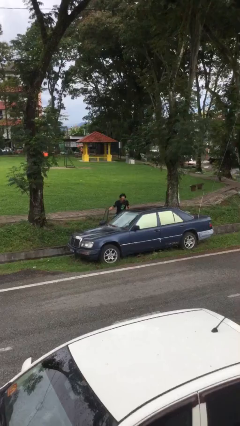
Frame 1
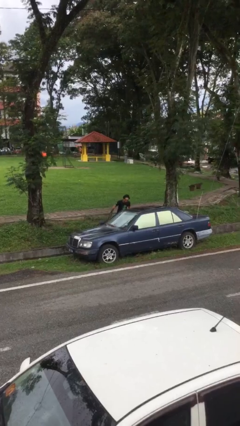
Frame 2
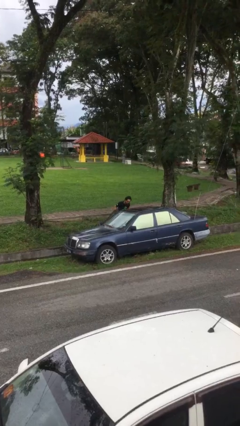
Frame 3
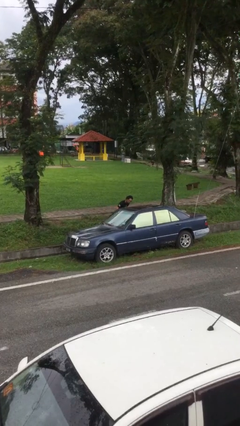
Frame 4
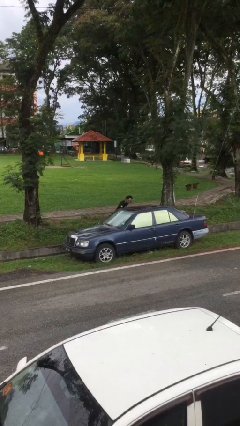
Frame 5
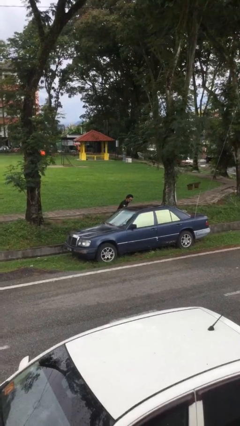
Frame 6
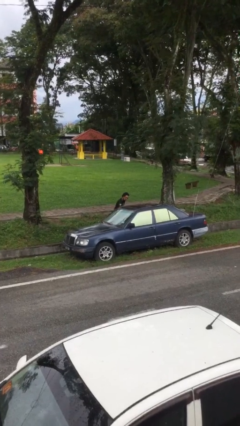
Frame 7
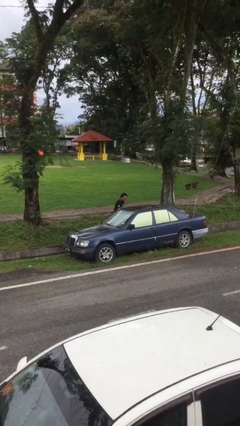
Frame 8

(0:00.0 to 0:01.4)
person closes car door

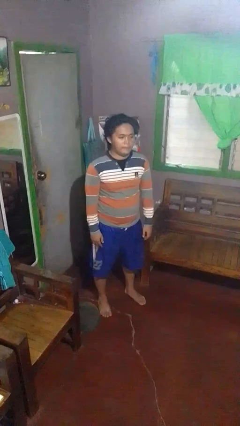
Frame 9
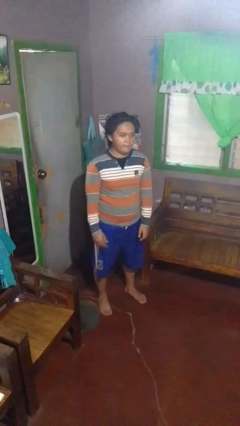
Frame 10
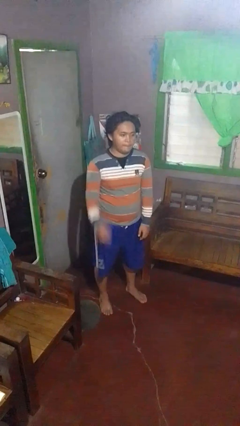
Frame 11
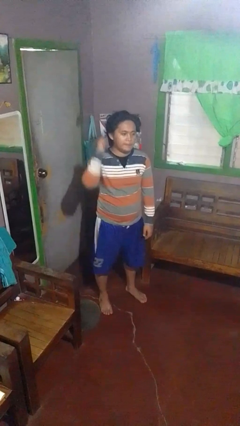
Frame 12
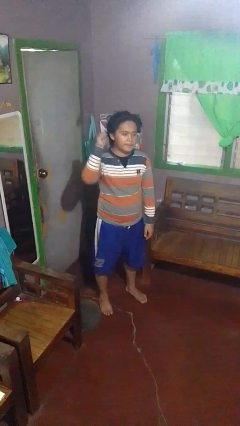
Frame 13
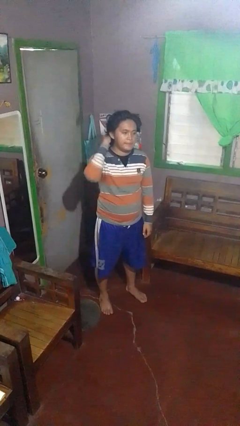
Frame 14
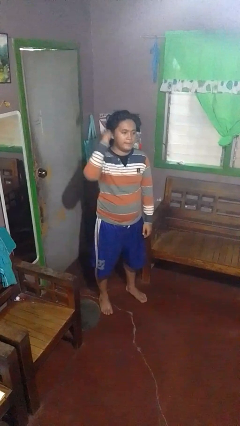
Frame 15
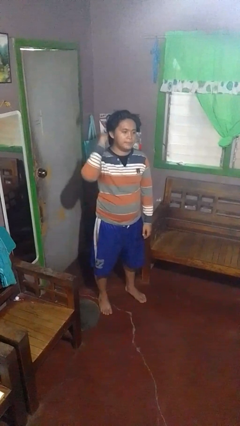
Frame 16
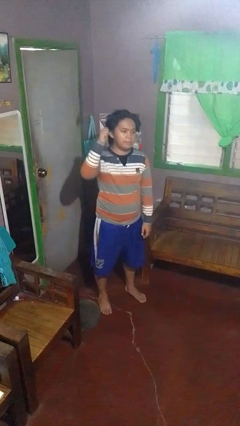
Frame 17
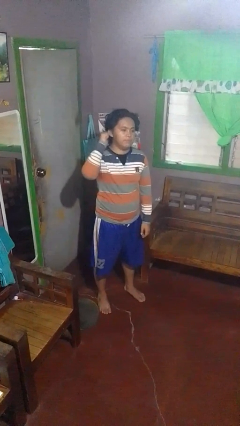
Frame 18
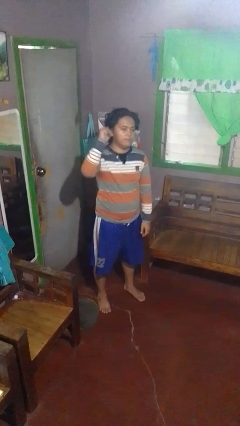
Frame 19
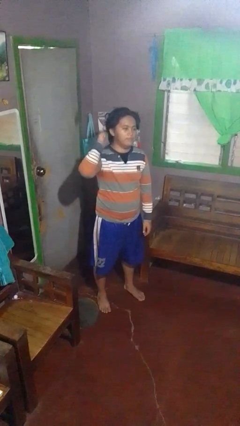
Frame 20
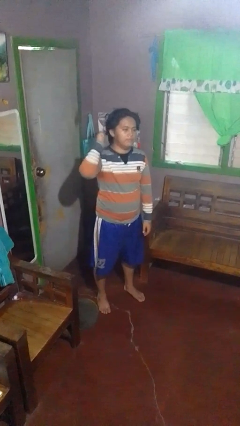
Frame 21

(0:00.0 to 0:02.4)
person gestures behind me

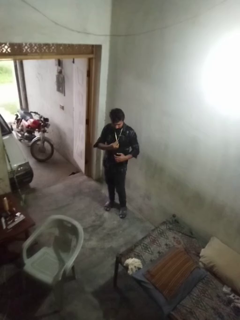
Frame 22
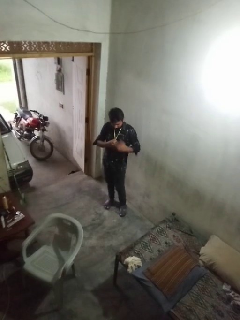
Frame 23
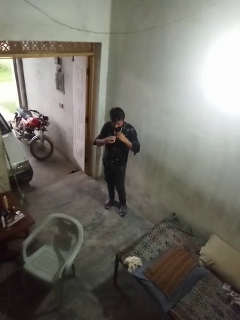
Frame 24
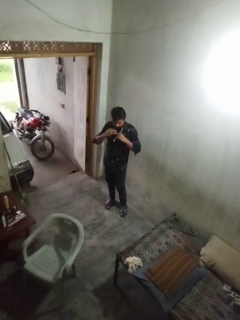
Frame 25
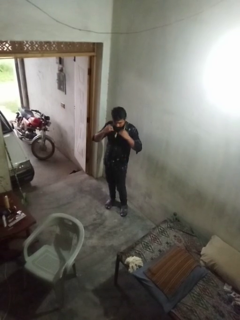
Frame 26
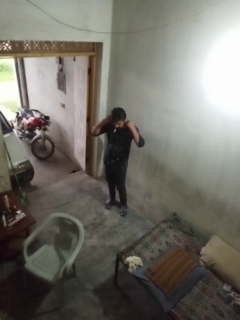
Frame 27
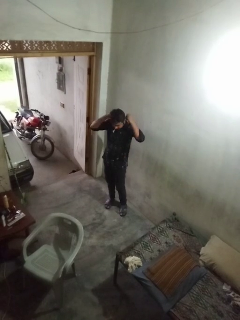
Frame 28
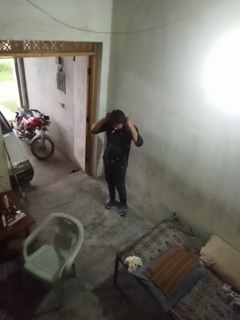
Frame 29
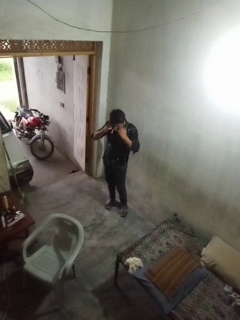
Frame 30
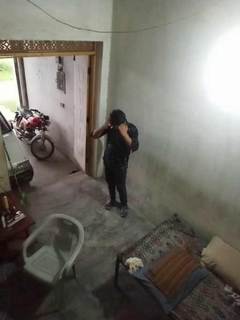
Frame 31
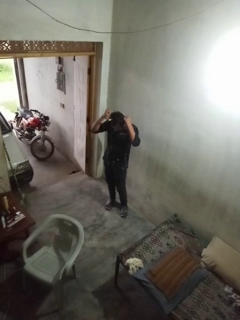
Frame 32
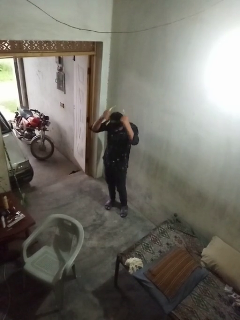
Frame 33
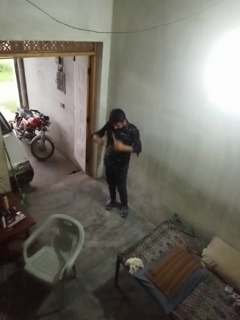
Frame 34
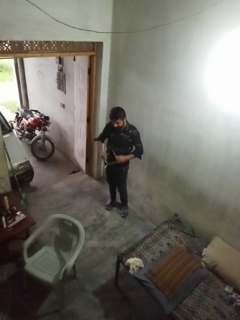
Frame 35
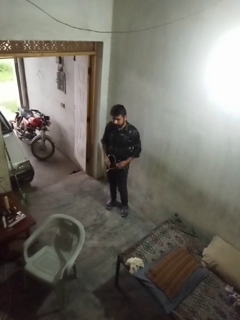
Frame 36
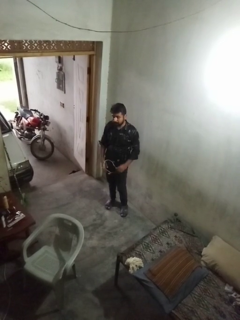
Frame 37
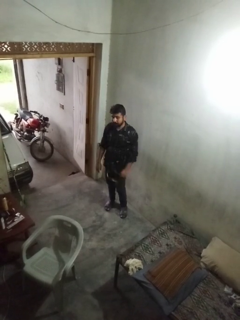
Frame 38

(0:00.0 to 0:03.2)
person takes off necklace

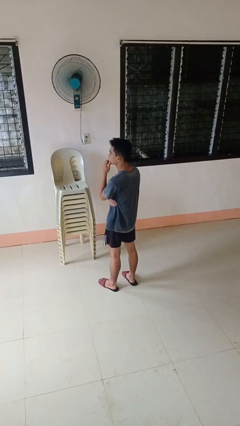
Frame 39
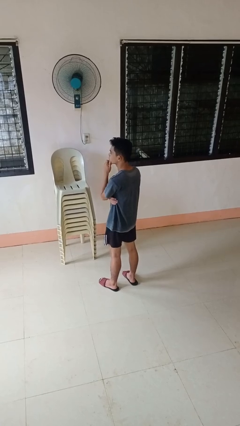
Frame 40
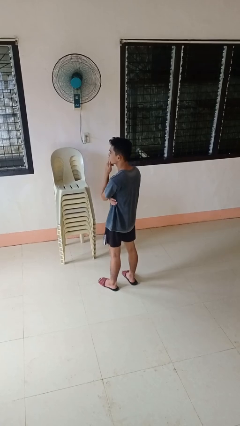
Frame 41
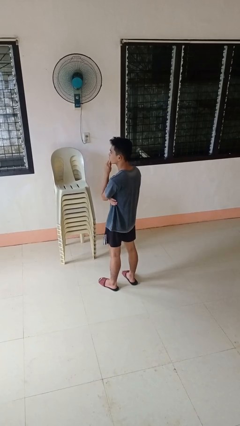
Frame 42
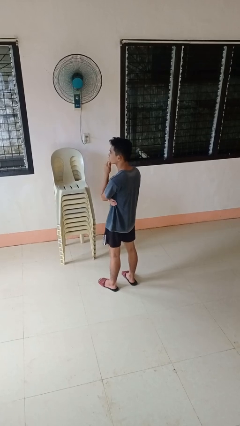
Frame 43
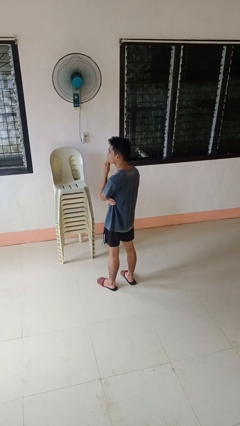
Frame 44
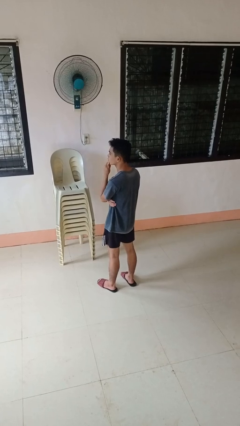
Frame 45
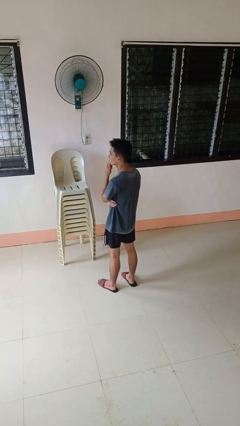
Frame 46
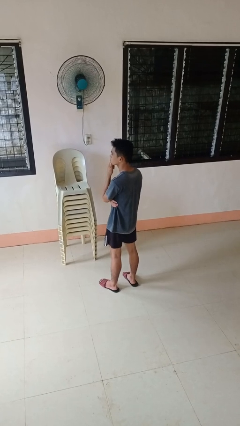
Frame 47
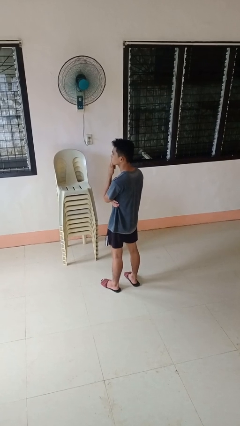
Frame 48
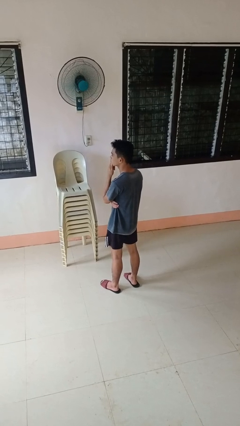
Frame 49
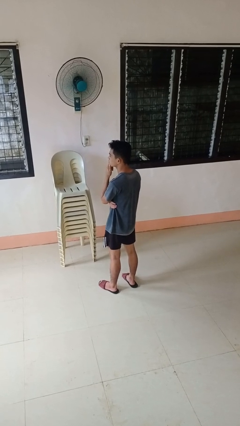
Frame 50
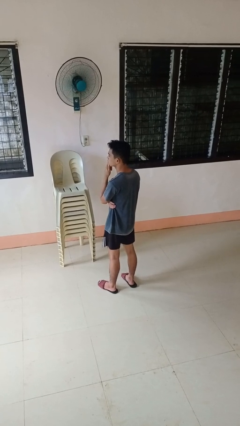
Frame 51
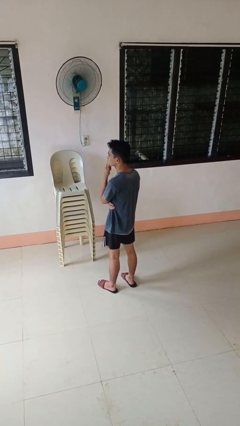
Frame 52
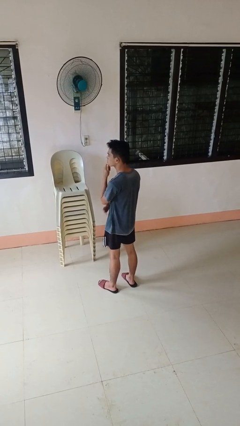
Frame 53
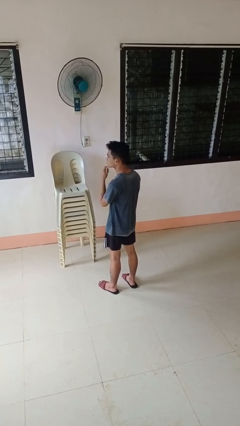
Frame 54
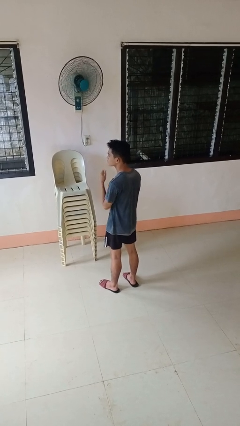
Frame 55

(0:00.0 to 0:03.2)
person strokes chin

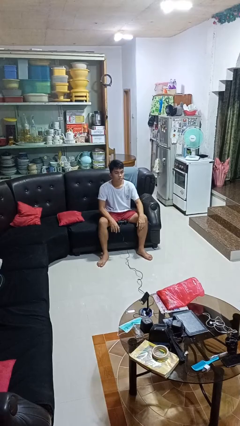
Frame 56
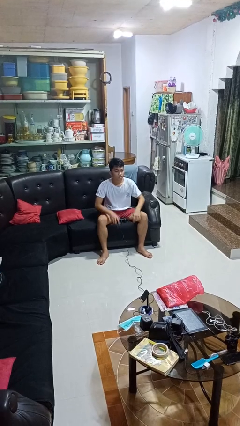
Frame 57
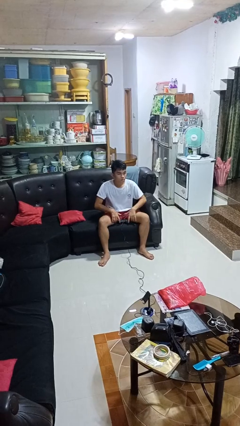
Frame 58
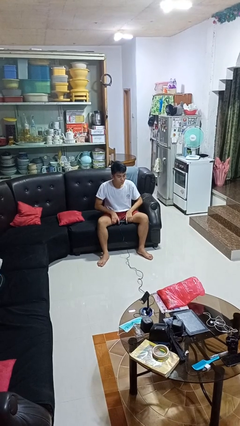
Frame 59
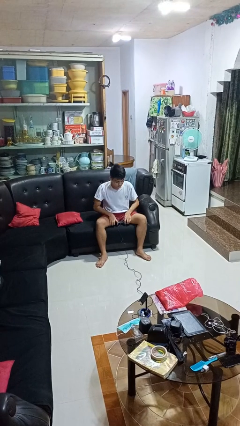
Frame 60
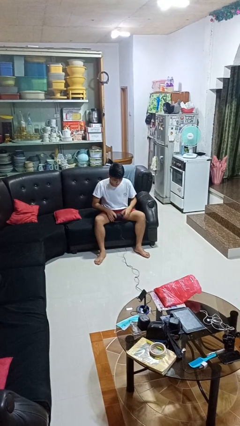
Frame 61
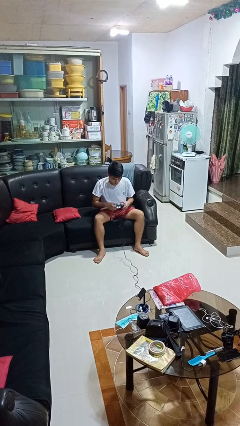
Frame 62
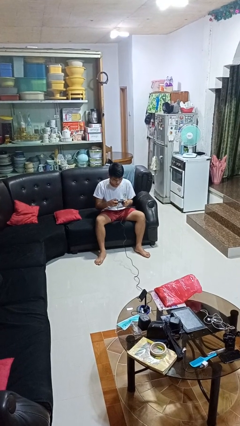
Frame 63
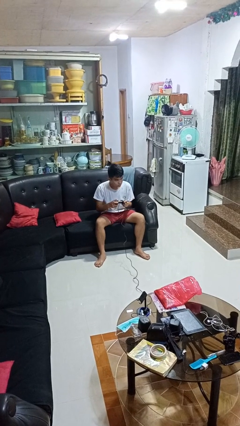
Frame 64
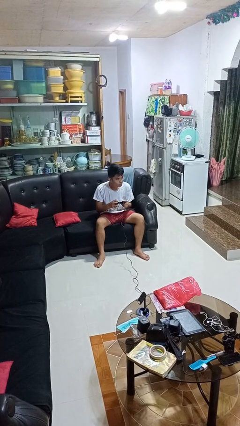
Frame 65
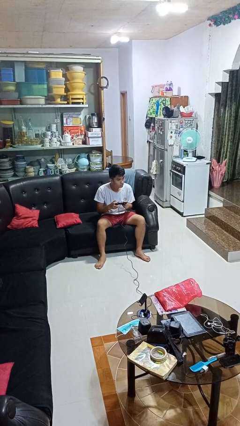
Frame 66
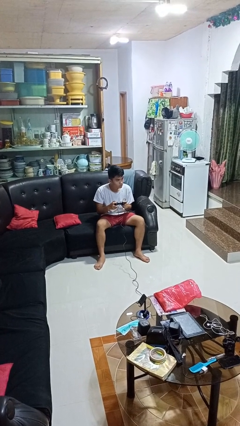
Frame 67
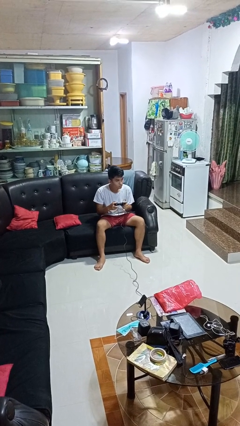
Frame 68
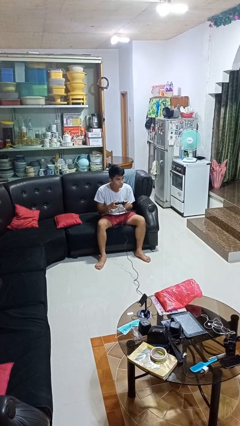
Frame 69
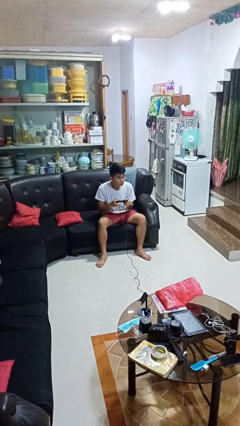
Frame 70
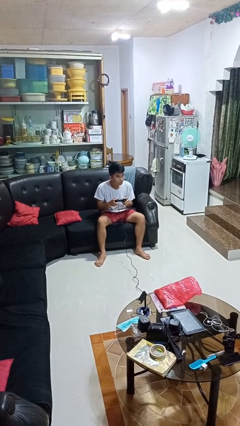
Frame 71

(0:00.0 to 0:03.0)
person interacts with handheld game

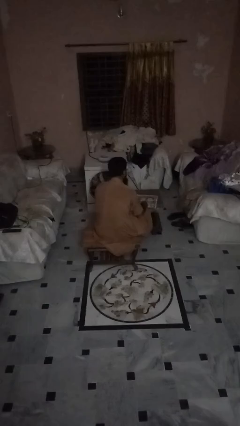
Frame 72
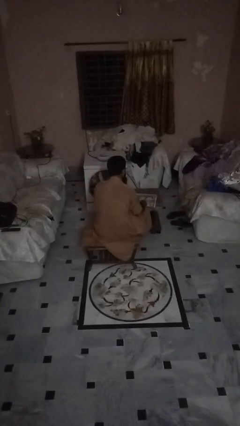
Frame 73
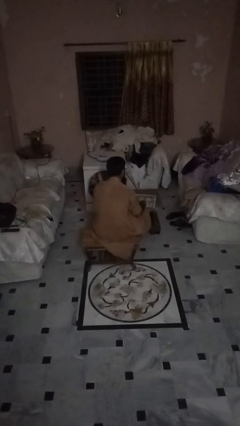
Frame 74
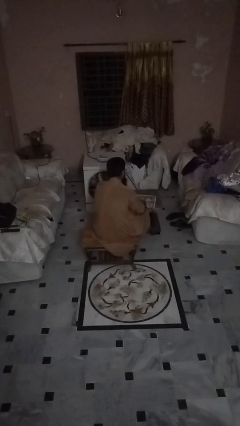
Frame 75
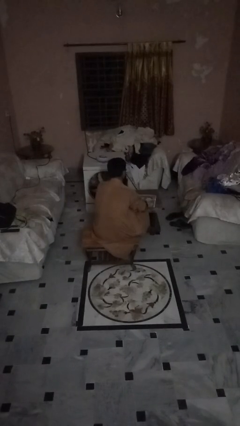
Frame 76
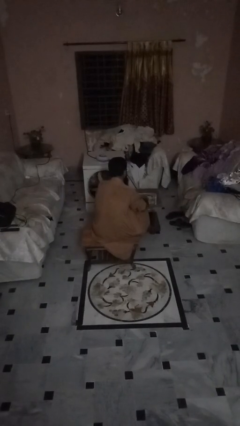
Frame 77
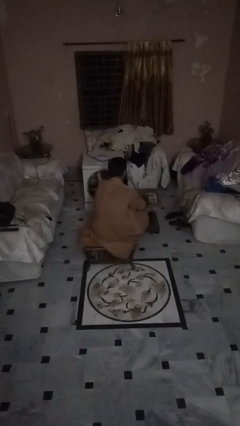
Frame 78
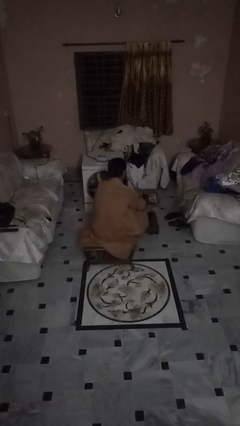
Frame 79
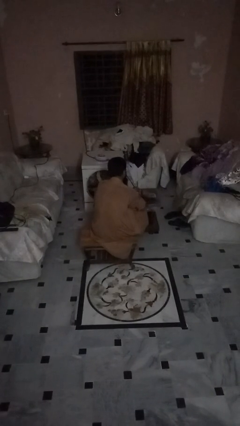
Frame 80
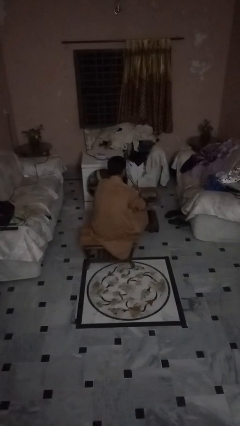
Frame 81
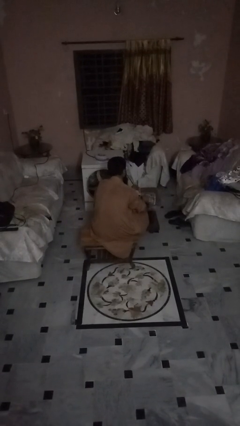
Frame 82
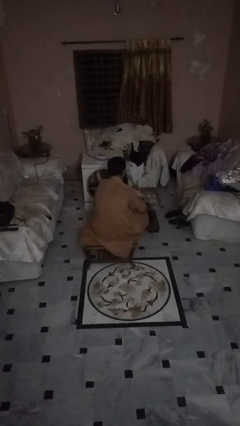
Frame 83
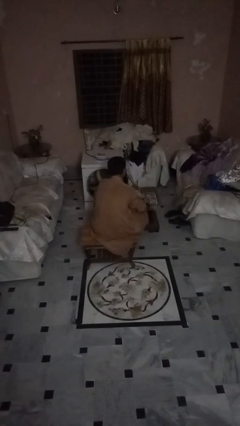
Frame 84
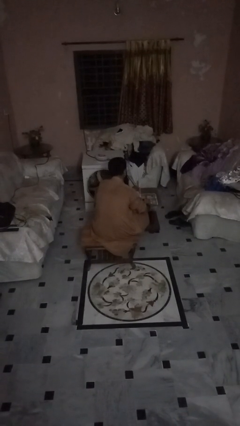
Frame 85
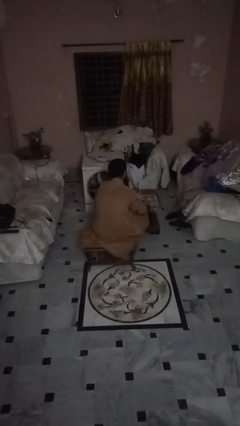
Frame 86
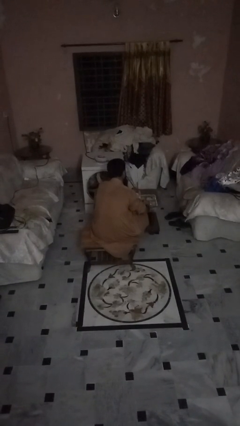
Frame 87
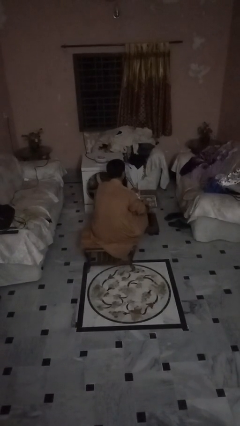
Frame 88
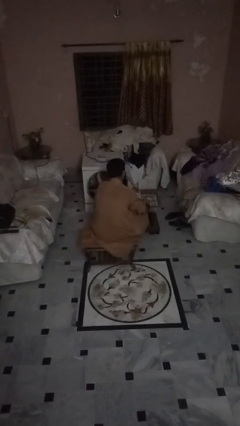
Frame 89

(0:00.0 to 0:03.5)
person tears paper

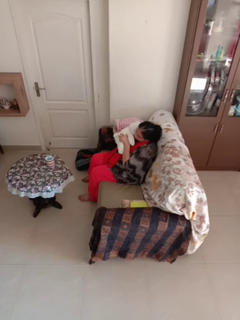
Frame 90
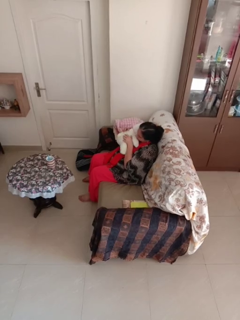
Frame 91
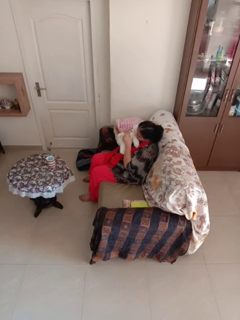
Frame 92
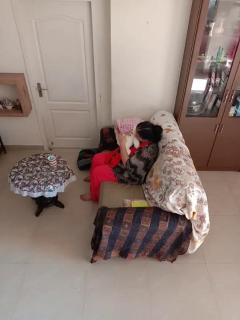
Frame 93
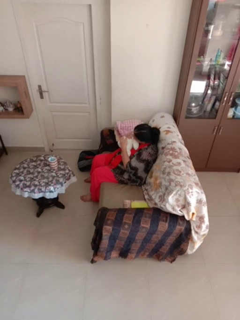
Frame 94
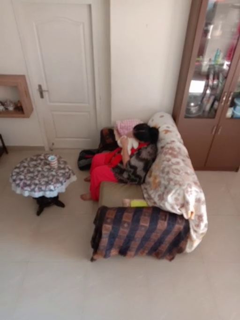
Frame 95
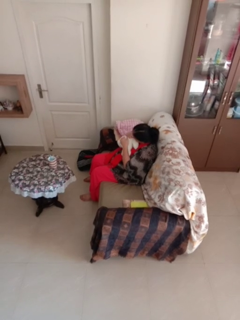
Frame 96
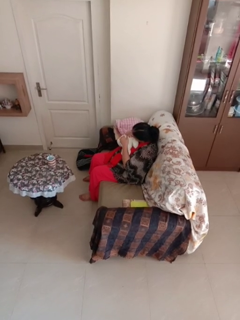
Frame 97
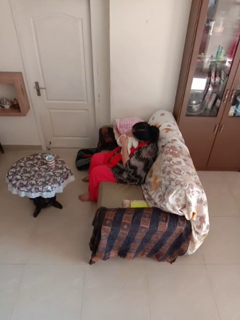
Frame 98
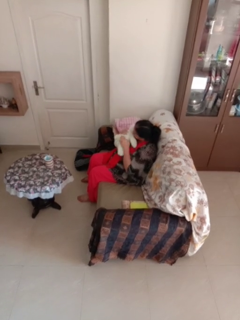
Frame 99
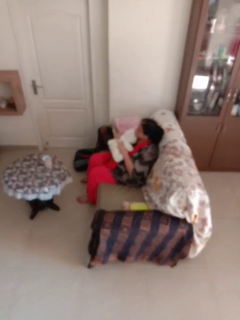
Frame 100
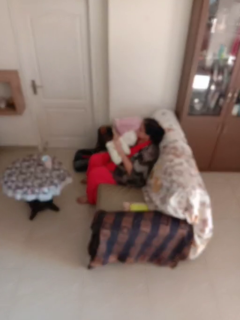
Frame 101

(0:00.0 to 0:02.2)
person hugs stuffed animal
